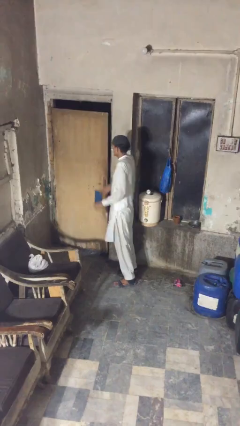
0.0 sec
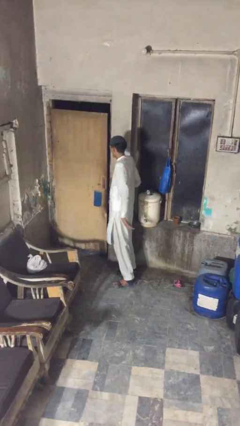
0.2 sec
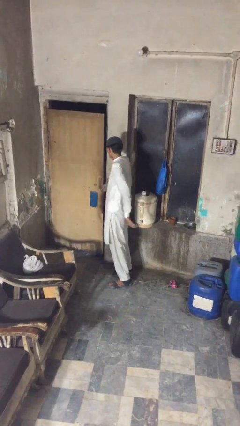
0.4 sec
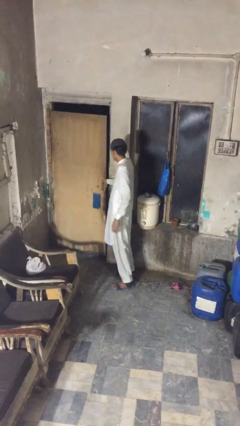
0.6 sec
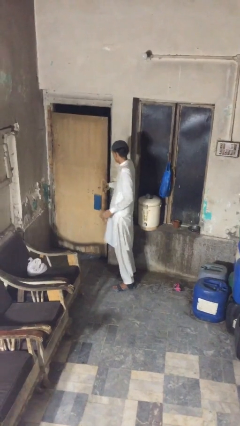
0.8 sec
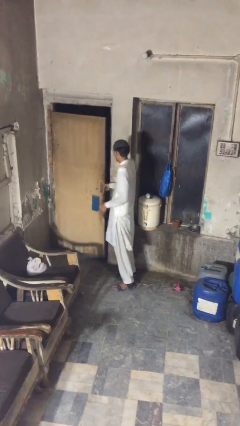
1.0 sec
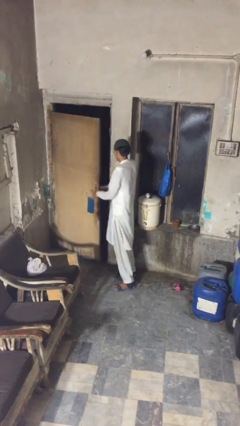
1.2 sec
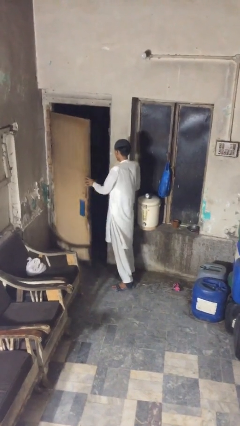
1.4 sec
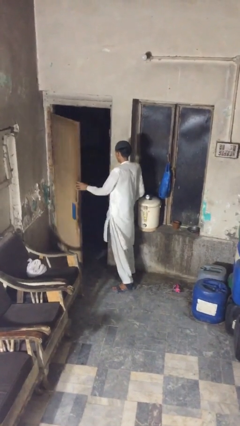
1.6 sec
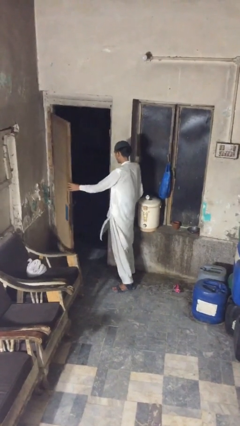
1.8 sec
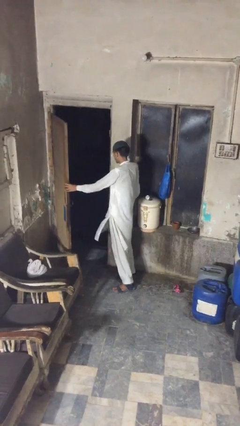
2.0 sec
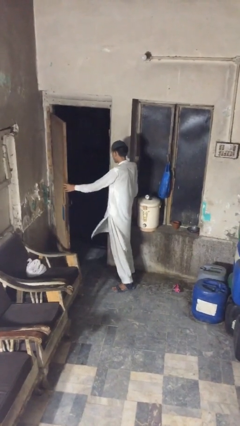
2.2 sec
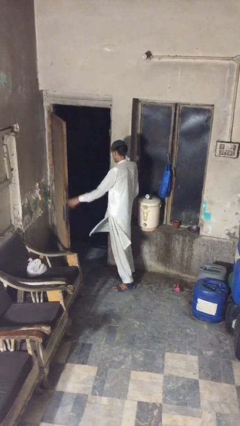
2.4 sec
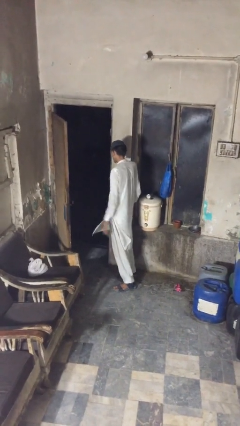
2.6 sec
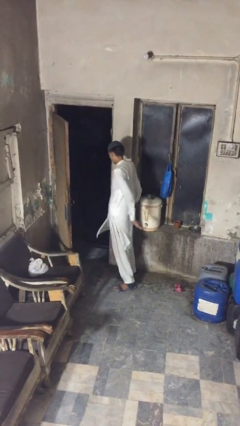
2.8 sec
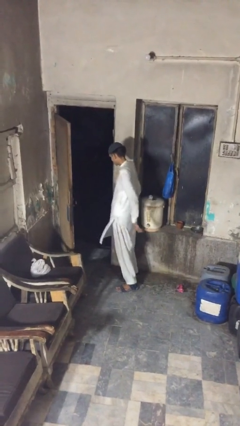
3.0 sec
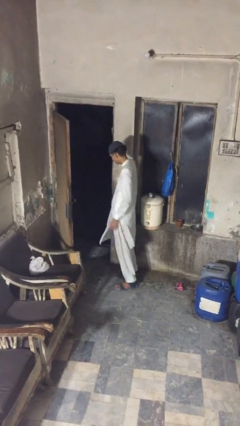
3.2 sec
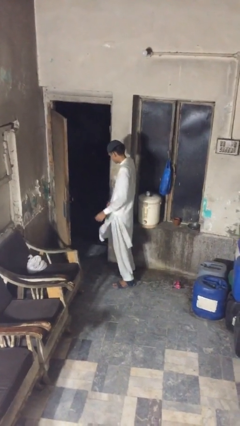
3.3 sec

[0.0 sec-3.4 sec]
person opens facility door

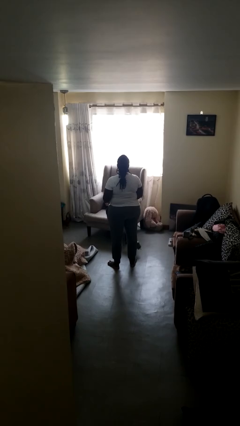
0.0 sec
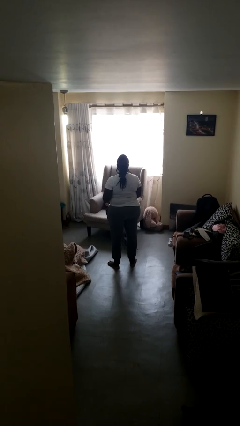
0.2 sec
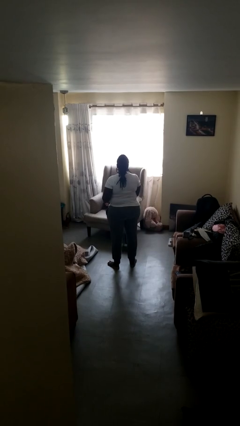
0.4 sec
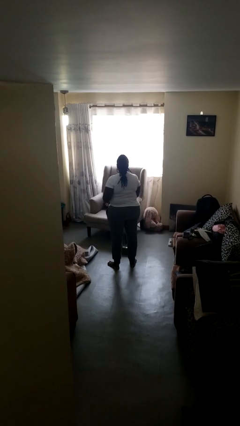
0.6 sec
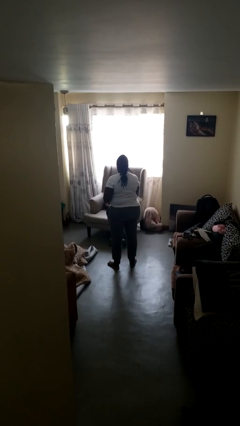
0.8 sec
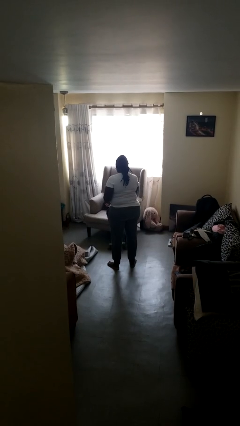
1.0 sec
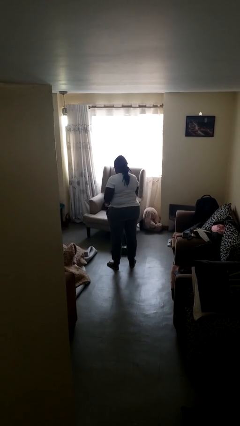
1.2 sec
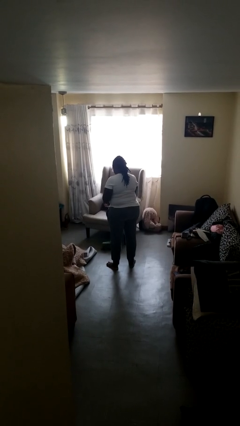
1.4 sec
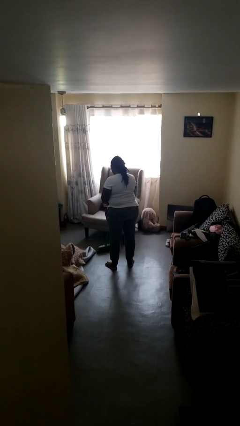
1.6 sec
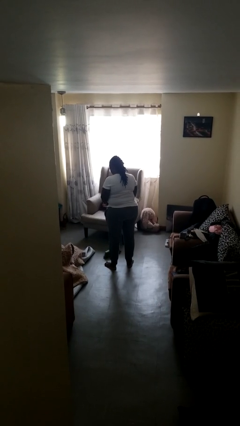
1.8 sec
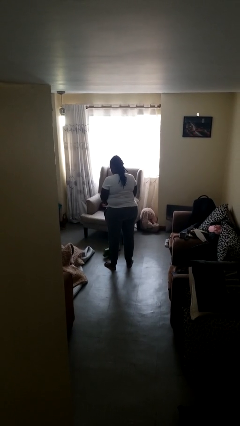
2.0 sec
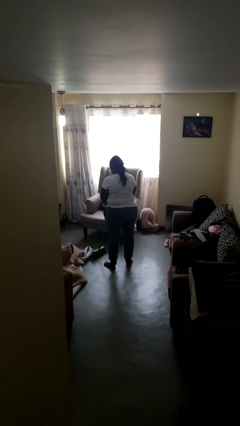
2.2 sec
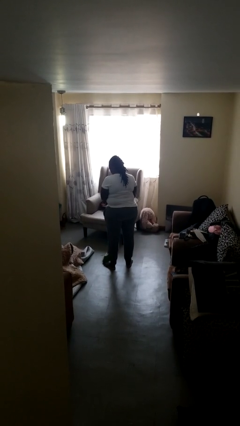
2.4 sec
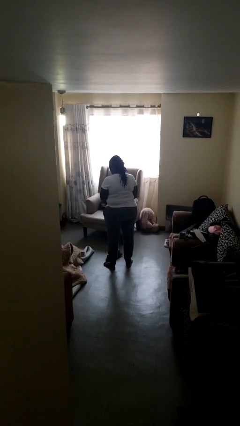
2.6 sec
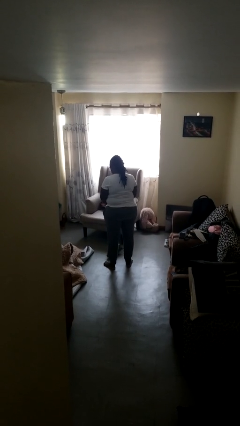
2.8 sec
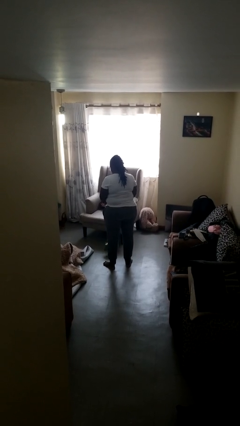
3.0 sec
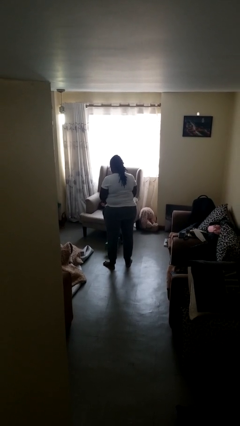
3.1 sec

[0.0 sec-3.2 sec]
person sweeps floor

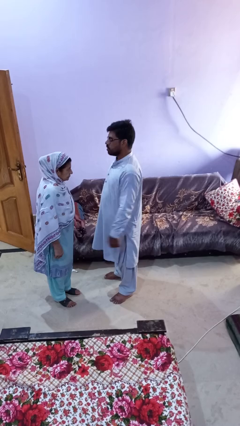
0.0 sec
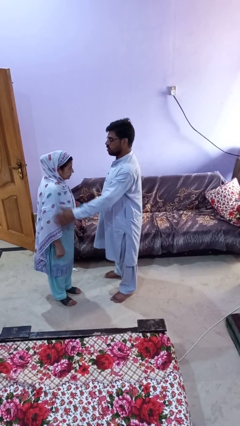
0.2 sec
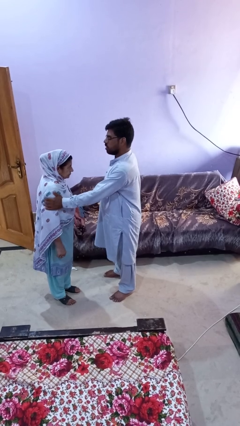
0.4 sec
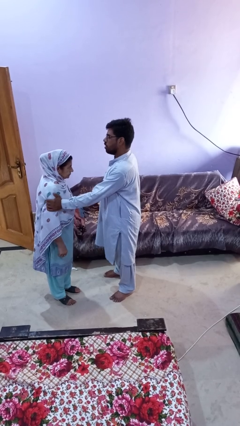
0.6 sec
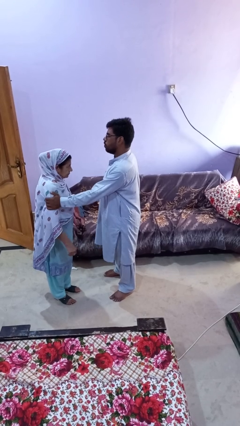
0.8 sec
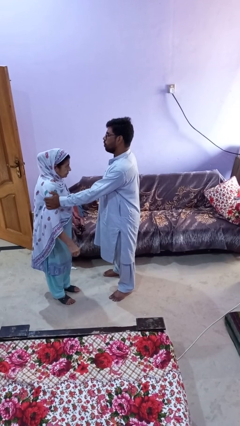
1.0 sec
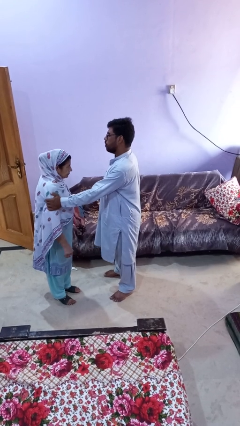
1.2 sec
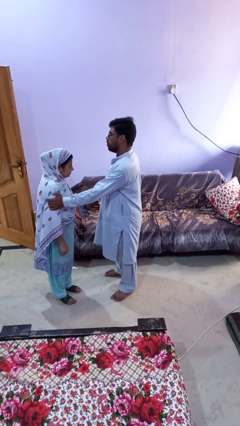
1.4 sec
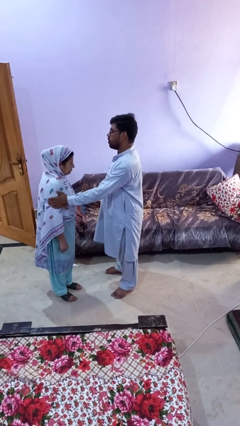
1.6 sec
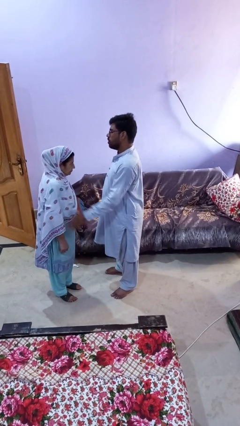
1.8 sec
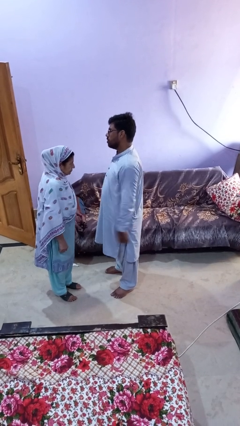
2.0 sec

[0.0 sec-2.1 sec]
person grabs person by bicep

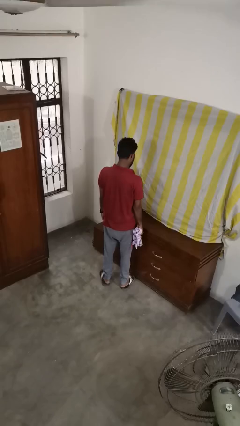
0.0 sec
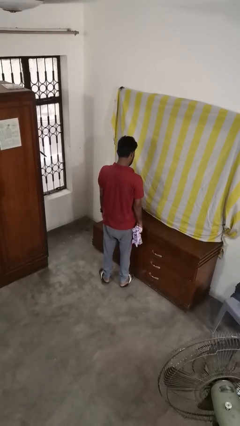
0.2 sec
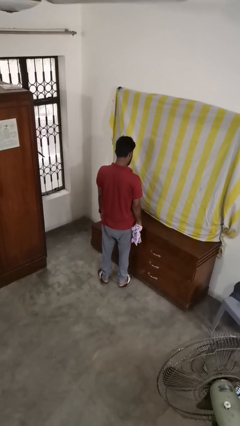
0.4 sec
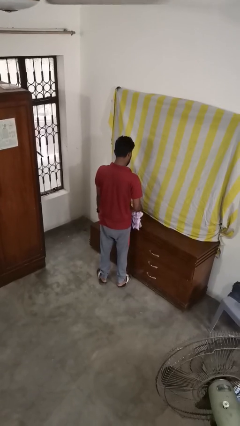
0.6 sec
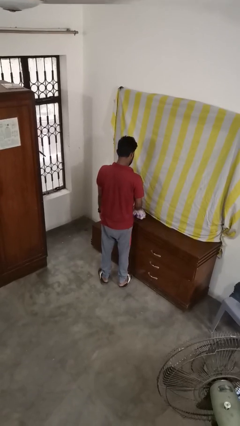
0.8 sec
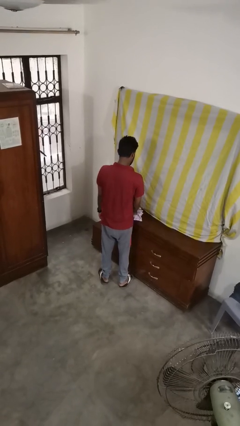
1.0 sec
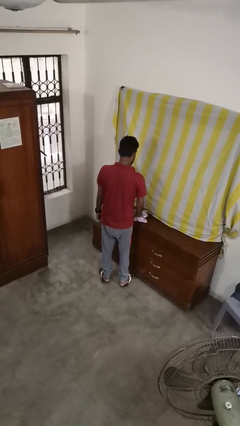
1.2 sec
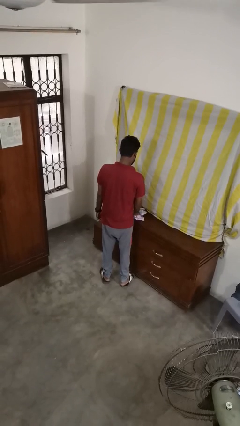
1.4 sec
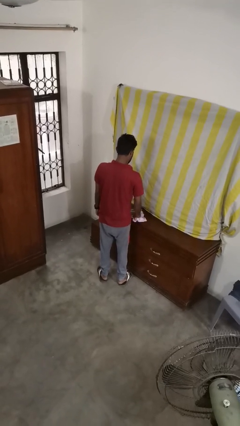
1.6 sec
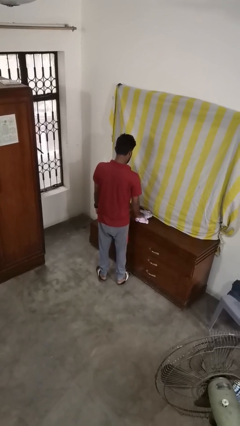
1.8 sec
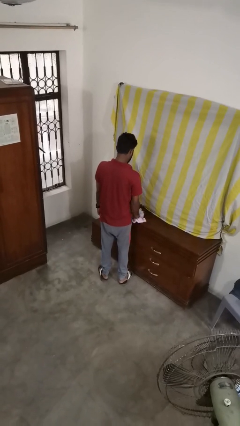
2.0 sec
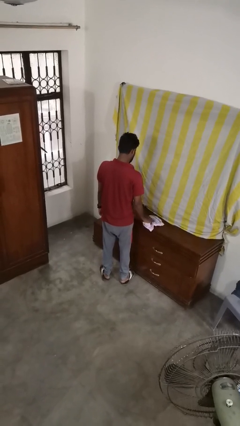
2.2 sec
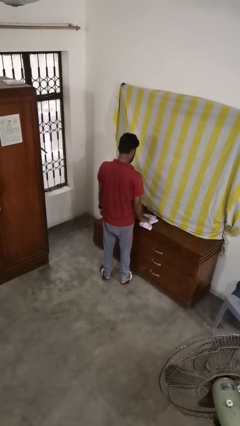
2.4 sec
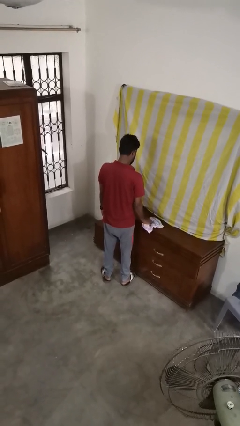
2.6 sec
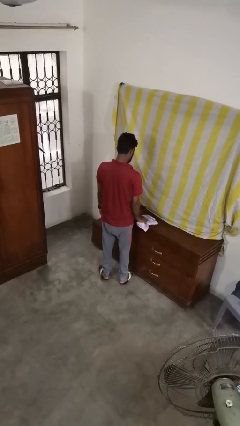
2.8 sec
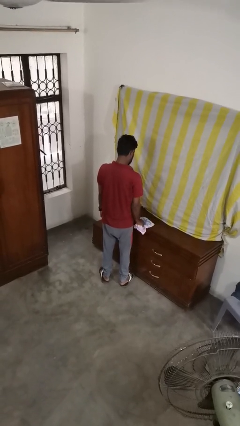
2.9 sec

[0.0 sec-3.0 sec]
person cleans table with rag

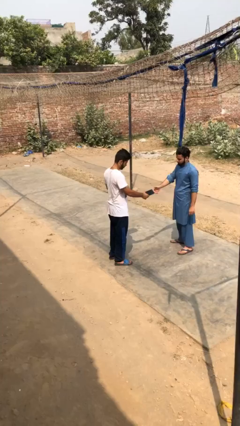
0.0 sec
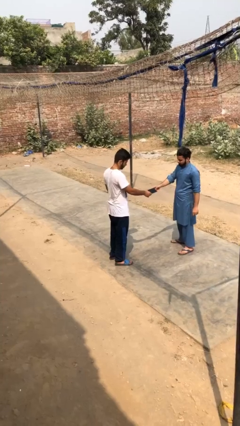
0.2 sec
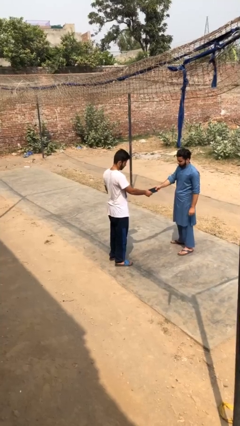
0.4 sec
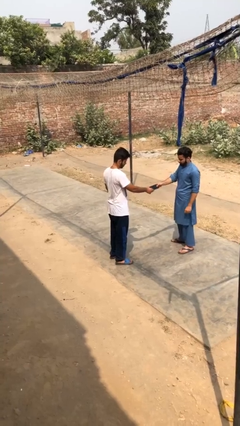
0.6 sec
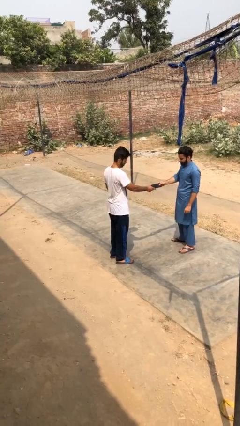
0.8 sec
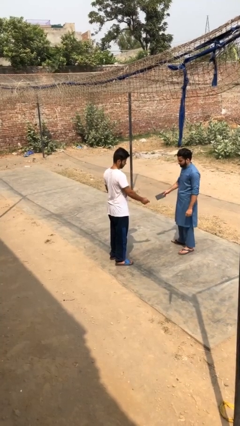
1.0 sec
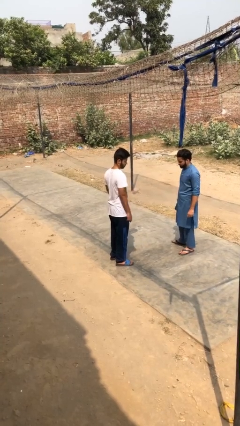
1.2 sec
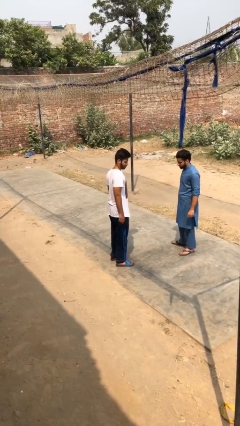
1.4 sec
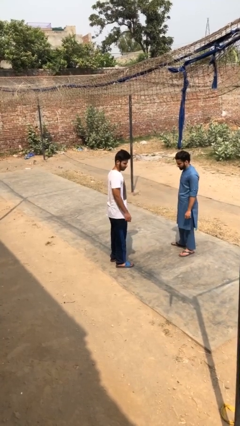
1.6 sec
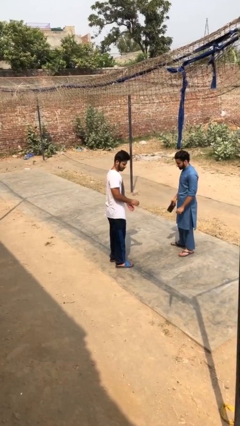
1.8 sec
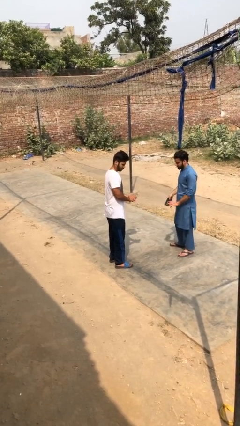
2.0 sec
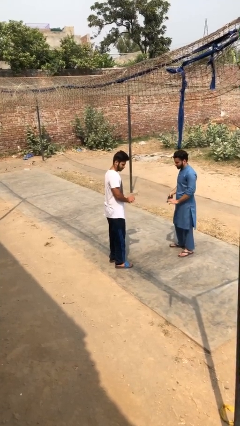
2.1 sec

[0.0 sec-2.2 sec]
person transfers object to person

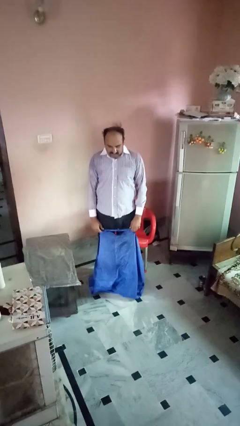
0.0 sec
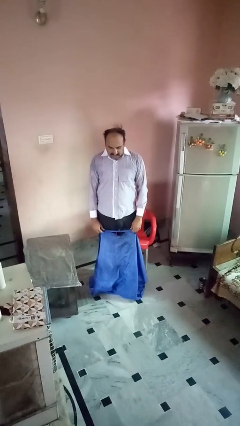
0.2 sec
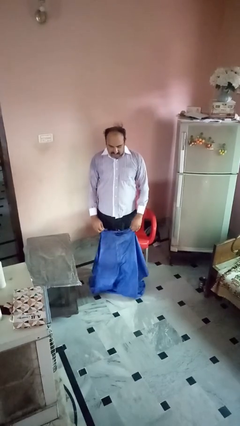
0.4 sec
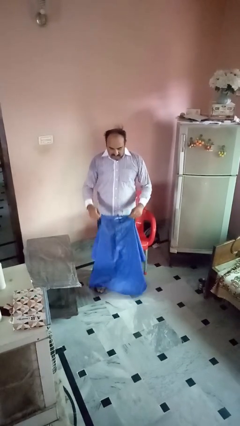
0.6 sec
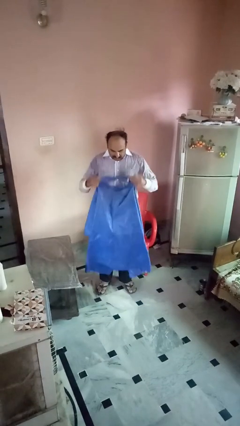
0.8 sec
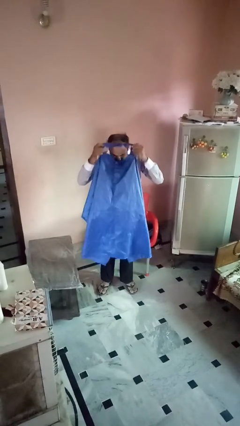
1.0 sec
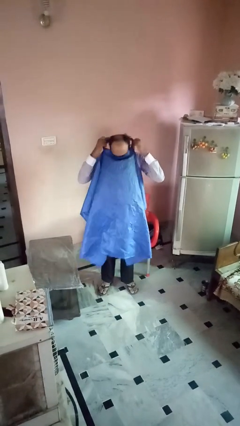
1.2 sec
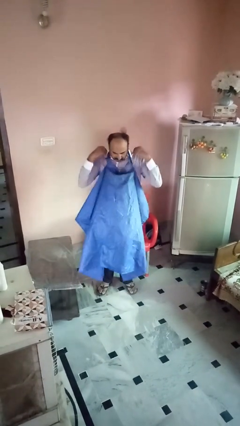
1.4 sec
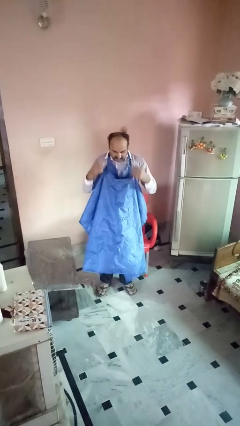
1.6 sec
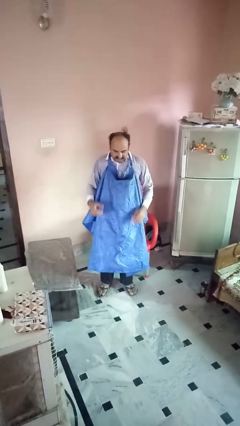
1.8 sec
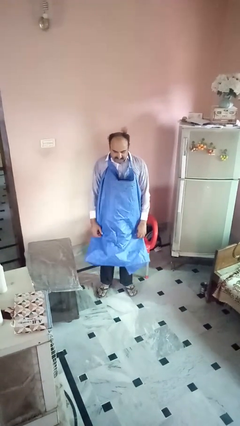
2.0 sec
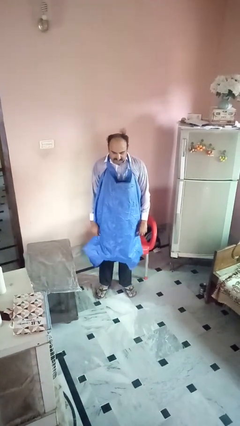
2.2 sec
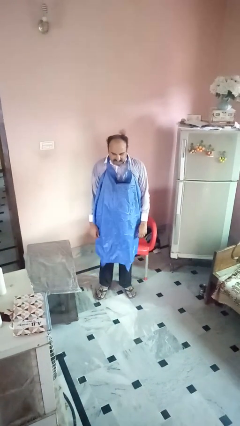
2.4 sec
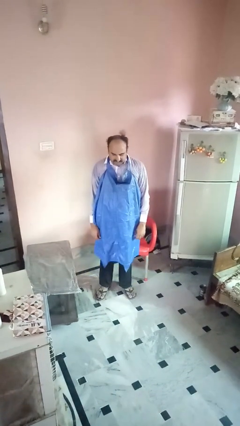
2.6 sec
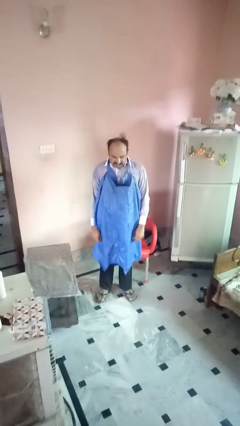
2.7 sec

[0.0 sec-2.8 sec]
person puts on apron

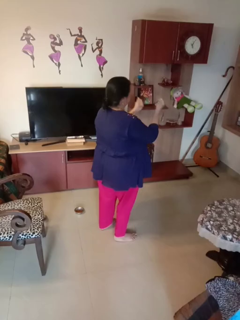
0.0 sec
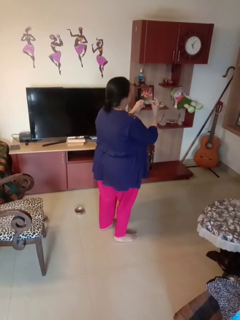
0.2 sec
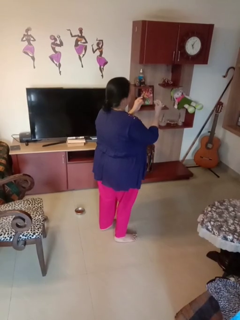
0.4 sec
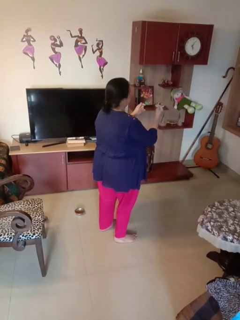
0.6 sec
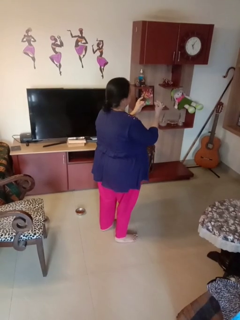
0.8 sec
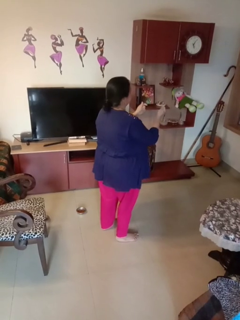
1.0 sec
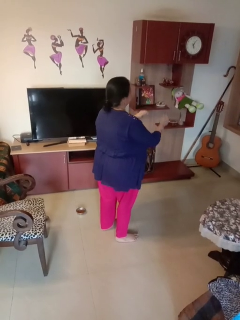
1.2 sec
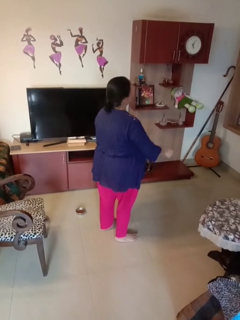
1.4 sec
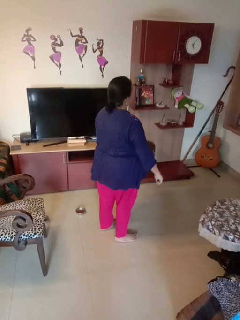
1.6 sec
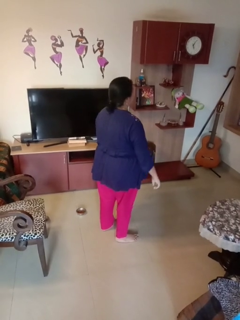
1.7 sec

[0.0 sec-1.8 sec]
person snaps fingers
